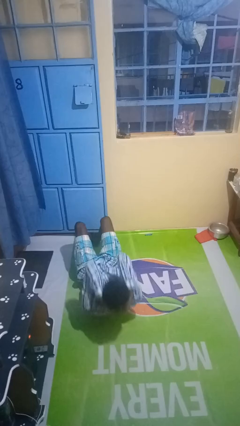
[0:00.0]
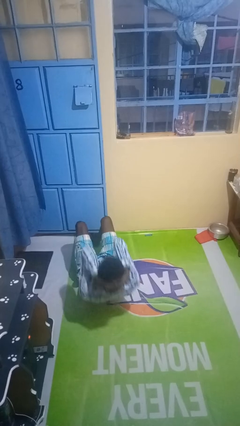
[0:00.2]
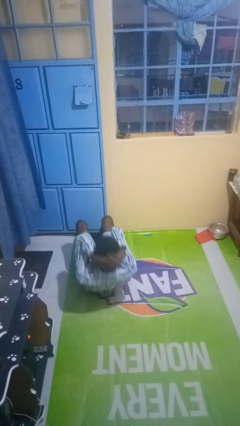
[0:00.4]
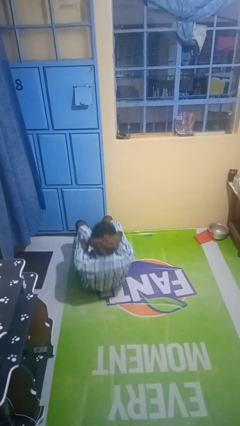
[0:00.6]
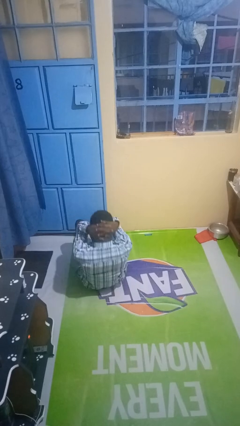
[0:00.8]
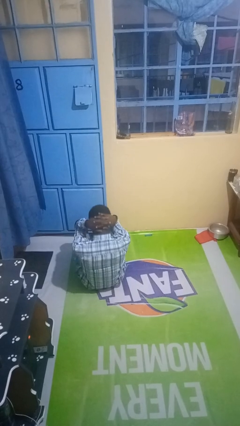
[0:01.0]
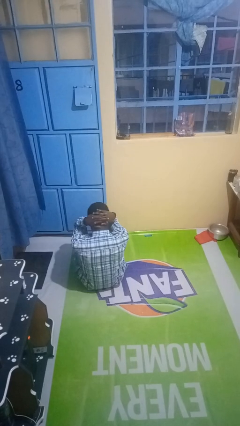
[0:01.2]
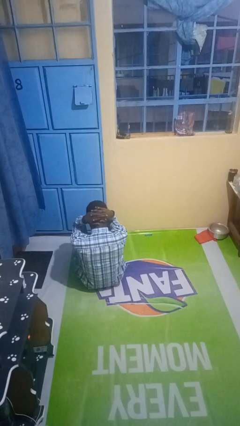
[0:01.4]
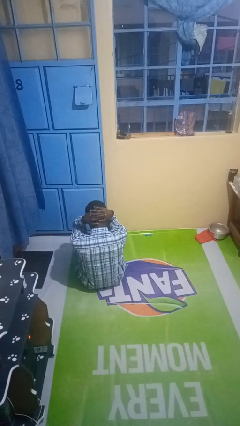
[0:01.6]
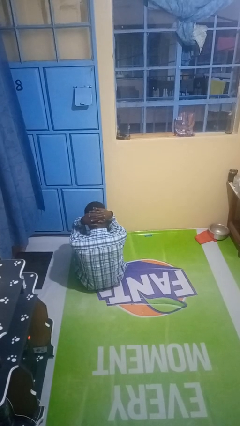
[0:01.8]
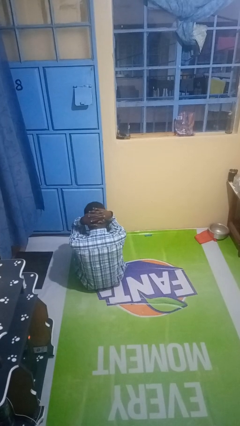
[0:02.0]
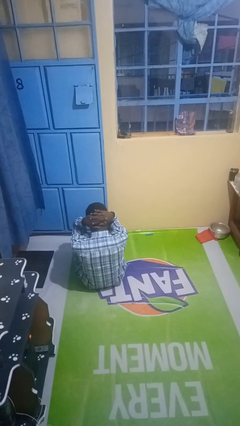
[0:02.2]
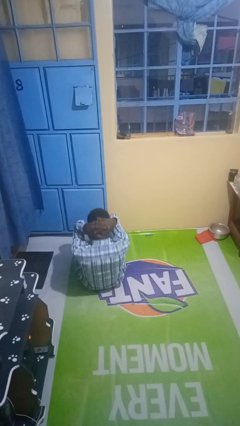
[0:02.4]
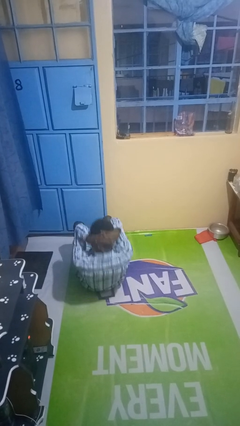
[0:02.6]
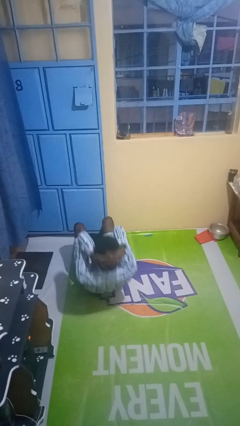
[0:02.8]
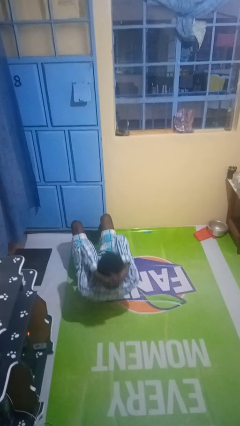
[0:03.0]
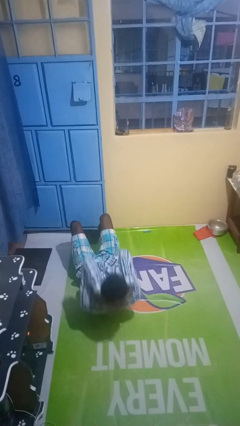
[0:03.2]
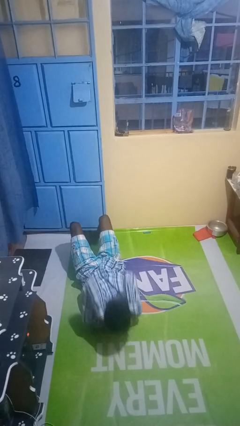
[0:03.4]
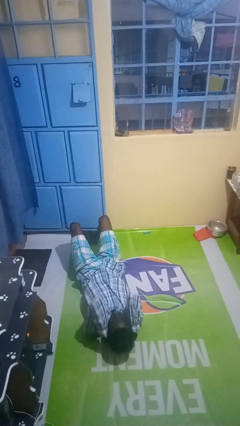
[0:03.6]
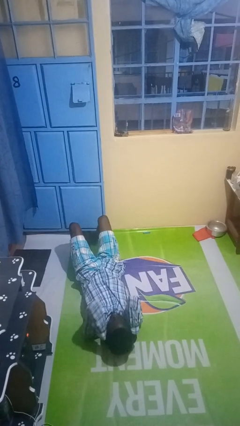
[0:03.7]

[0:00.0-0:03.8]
person exercises with situp

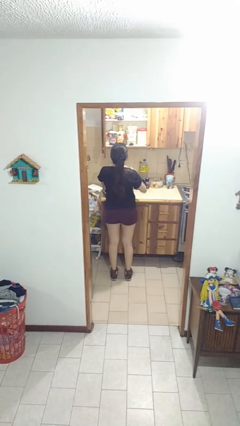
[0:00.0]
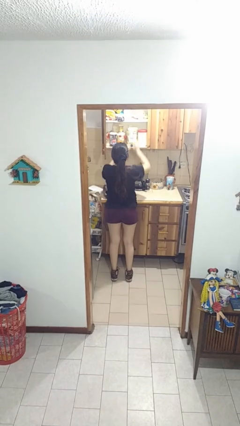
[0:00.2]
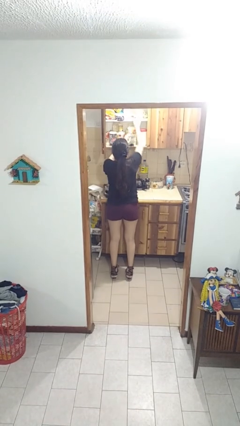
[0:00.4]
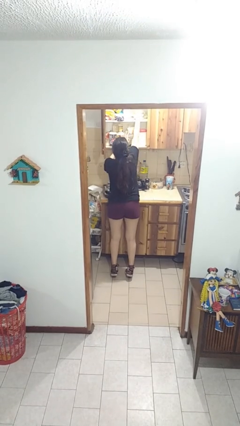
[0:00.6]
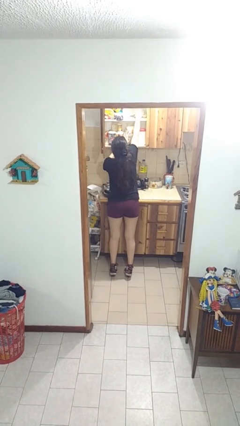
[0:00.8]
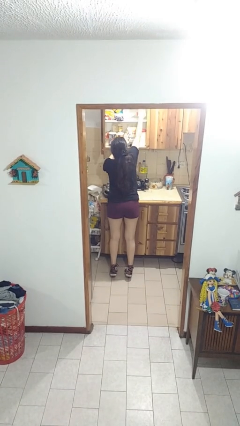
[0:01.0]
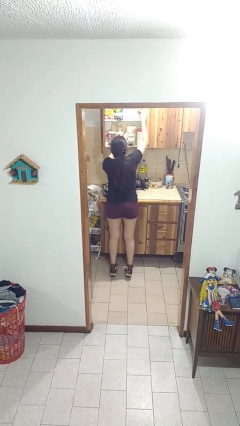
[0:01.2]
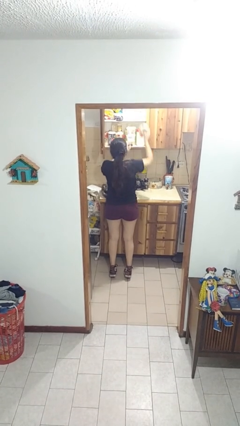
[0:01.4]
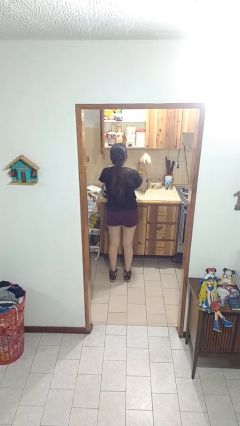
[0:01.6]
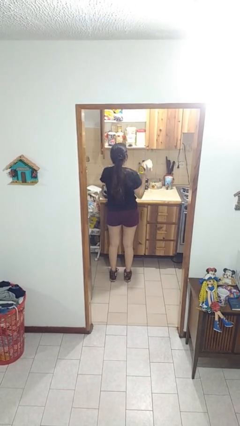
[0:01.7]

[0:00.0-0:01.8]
person takes object from cabinet

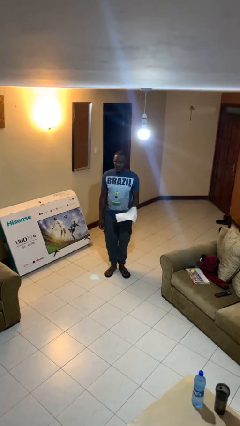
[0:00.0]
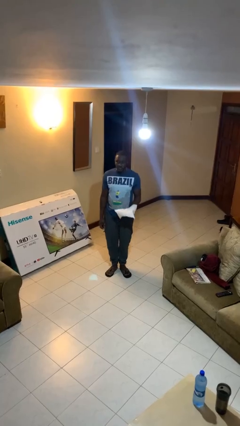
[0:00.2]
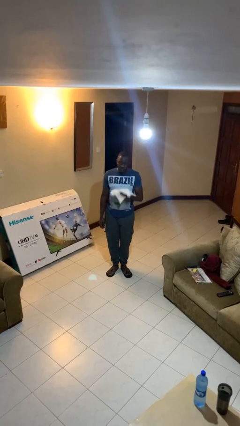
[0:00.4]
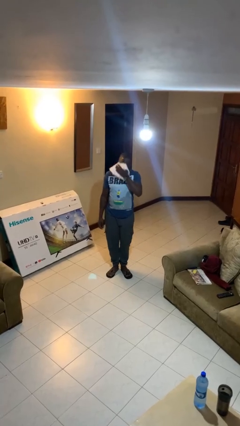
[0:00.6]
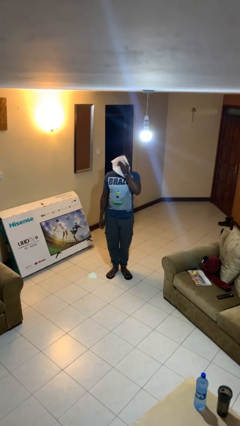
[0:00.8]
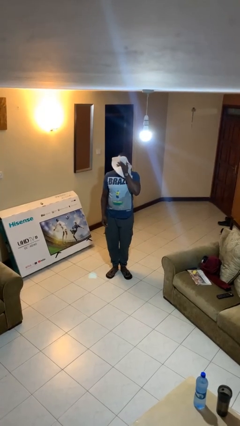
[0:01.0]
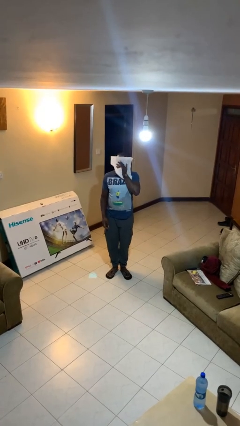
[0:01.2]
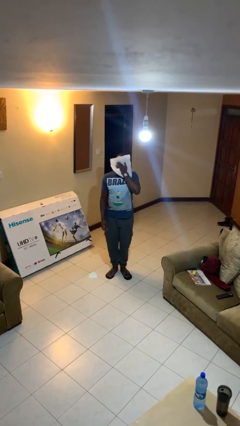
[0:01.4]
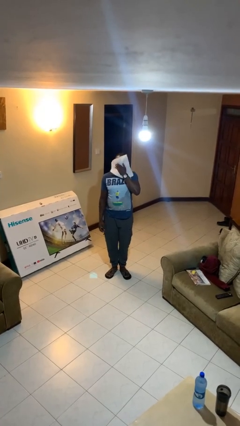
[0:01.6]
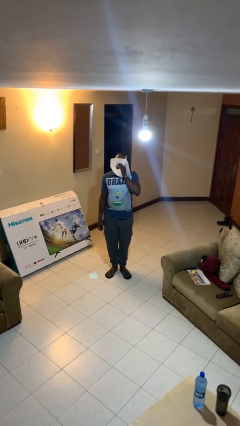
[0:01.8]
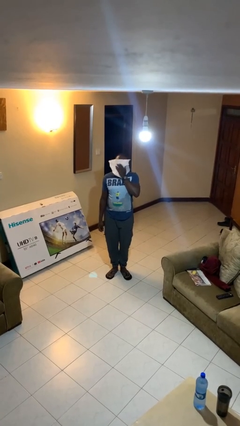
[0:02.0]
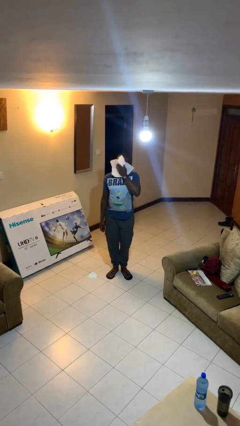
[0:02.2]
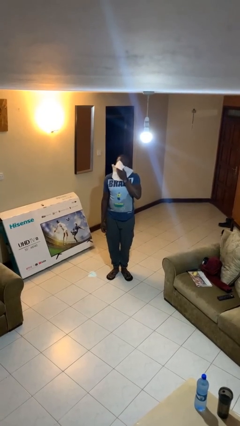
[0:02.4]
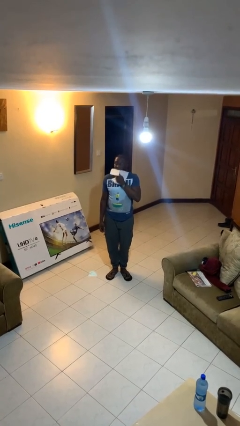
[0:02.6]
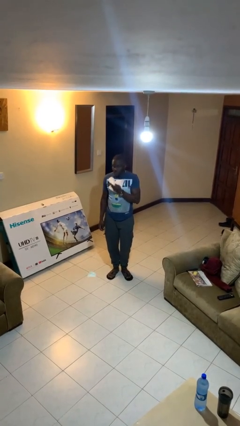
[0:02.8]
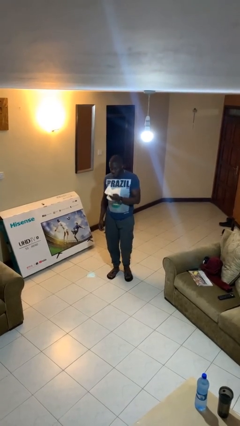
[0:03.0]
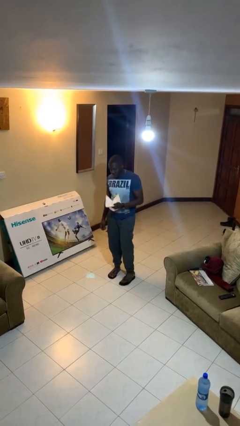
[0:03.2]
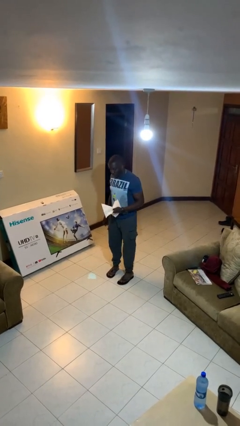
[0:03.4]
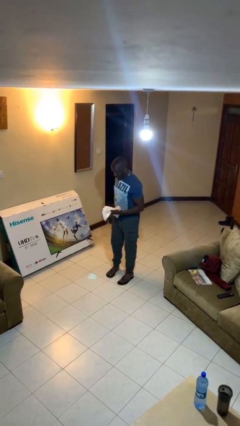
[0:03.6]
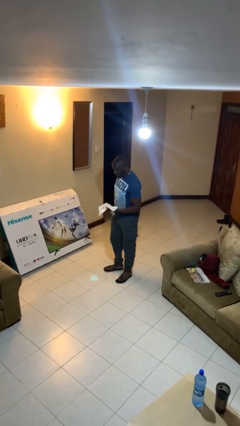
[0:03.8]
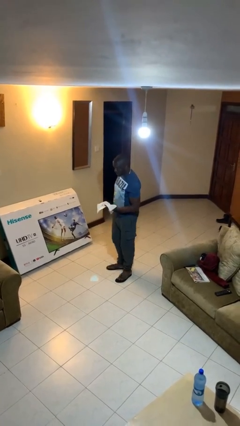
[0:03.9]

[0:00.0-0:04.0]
person wipes mouth with napkin

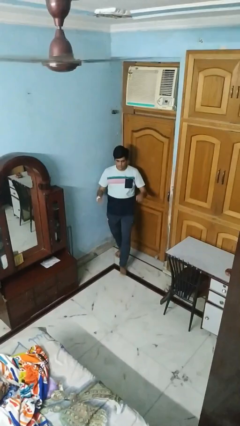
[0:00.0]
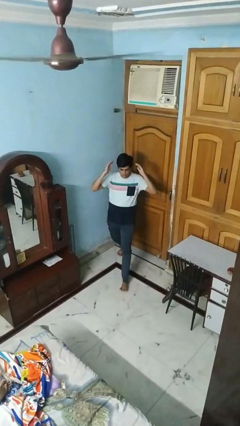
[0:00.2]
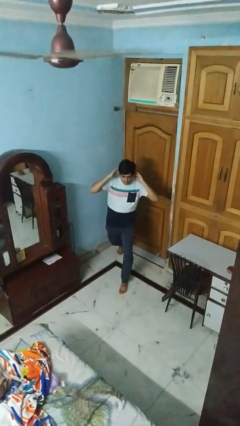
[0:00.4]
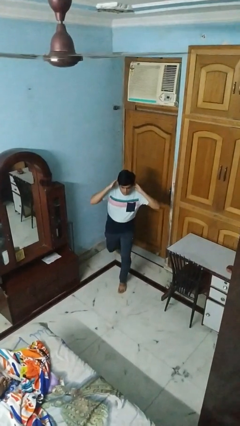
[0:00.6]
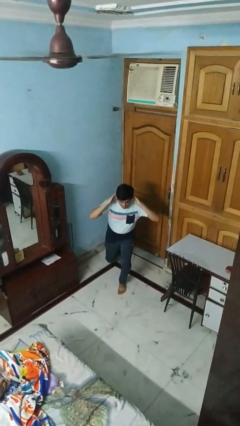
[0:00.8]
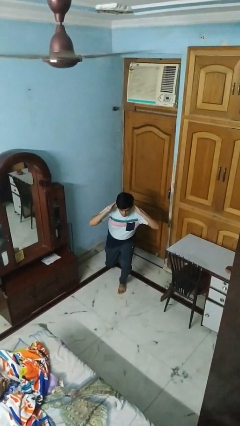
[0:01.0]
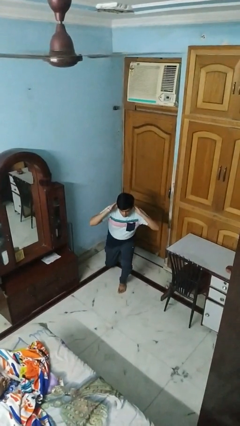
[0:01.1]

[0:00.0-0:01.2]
person exercises with lunges

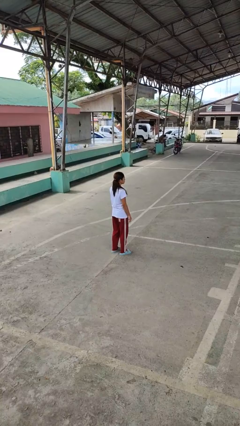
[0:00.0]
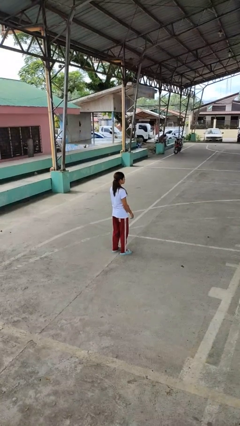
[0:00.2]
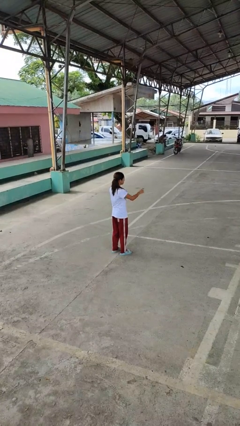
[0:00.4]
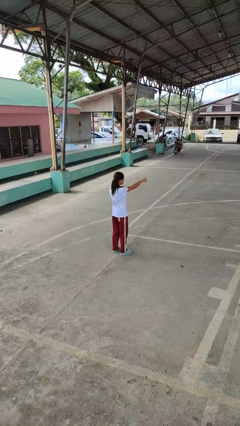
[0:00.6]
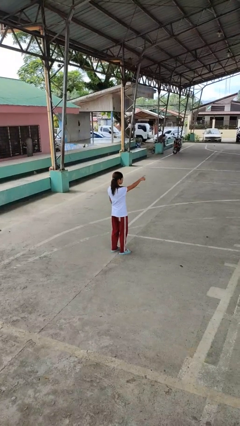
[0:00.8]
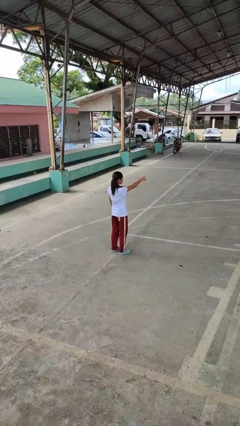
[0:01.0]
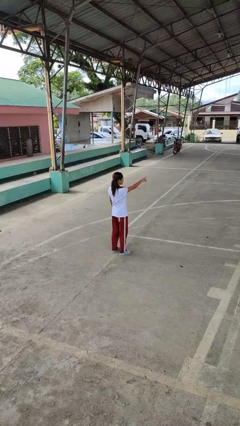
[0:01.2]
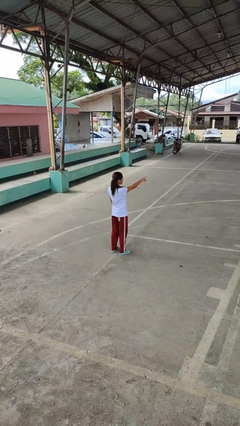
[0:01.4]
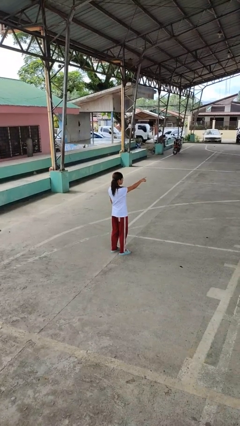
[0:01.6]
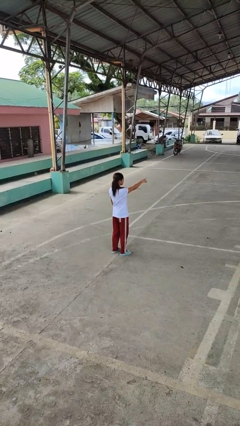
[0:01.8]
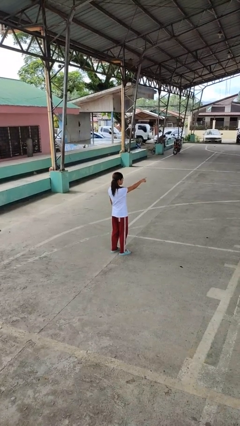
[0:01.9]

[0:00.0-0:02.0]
person points at person

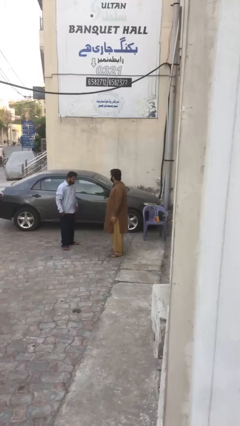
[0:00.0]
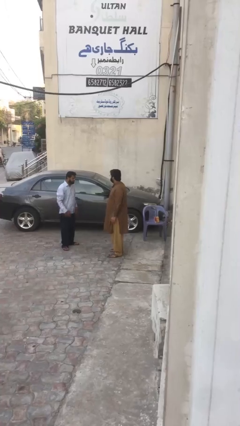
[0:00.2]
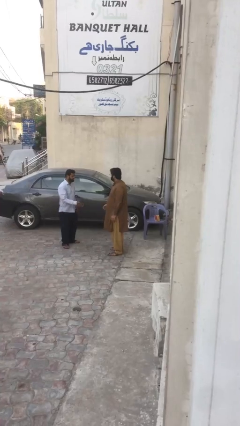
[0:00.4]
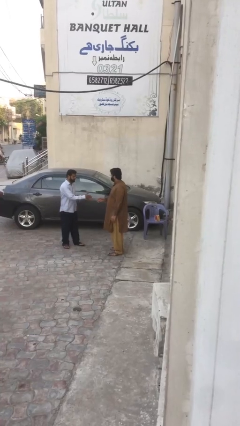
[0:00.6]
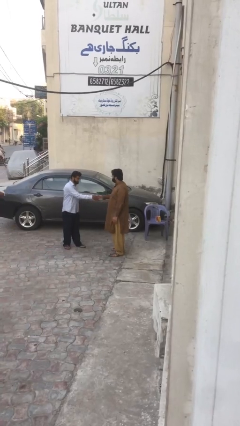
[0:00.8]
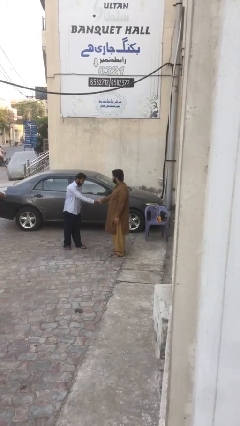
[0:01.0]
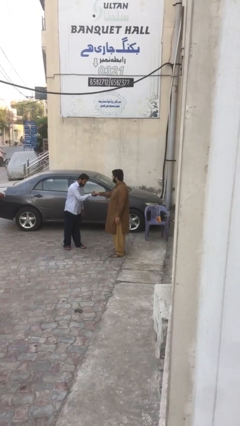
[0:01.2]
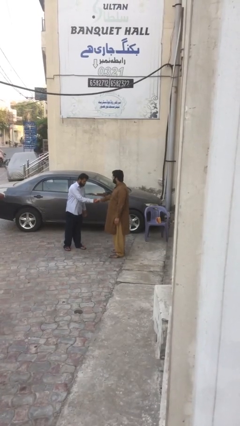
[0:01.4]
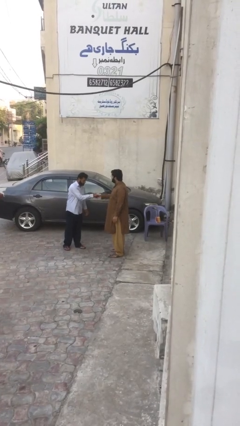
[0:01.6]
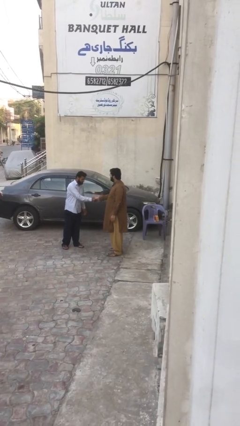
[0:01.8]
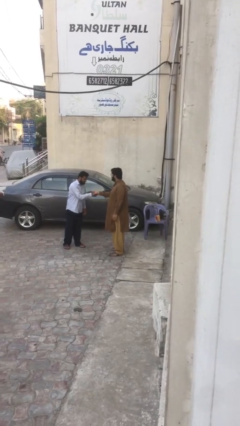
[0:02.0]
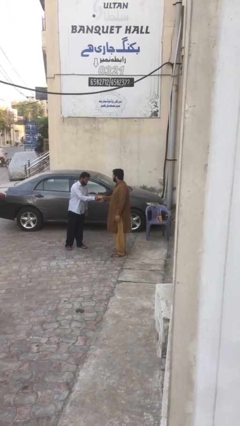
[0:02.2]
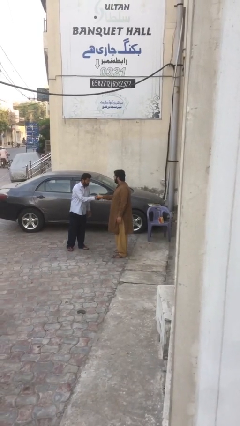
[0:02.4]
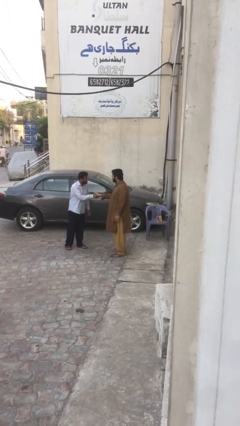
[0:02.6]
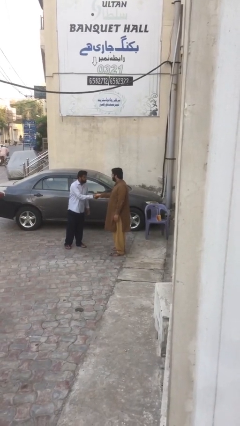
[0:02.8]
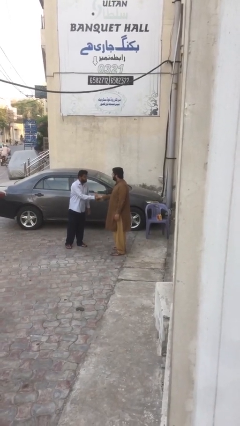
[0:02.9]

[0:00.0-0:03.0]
person shakes hand

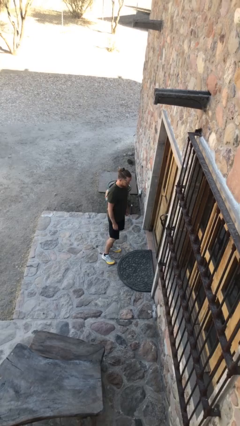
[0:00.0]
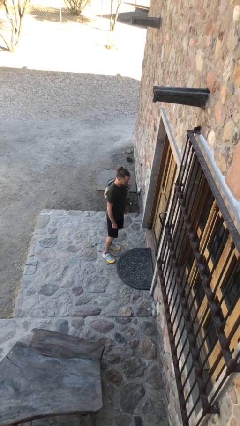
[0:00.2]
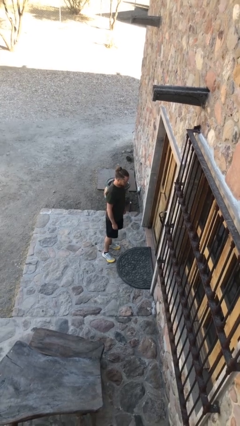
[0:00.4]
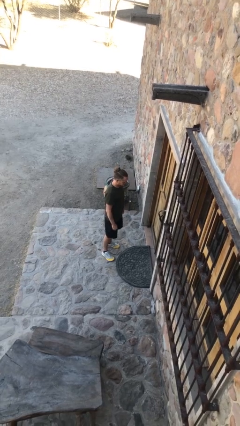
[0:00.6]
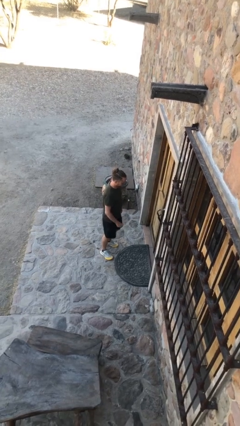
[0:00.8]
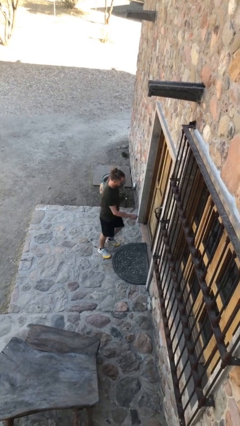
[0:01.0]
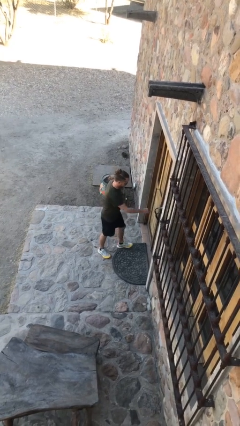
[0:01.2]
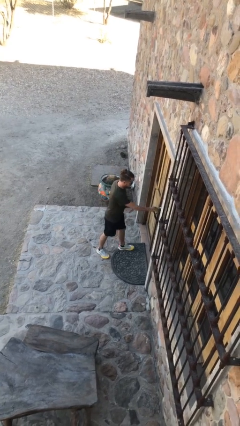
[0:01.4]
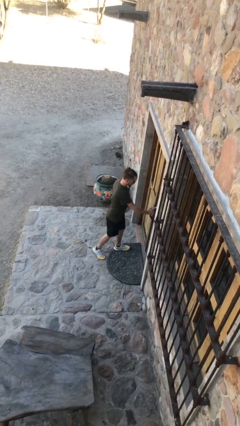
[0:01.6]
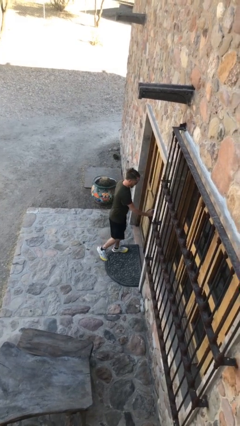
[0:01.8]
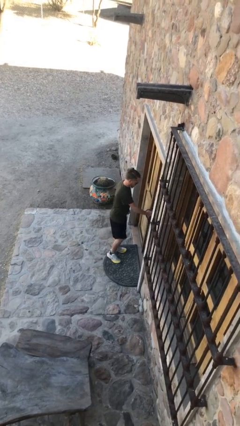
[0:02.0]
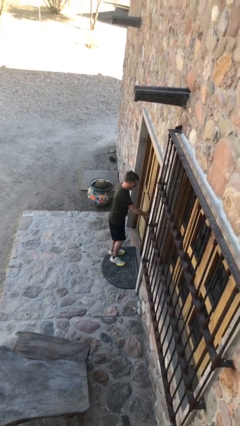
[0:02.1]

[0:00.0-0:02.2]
person opens facility door
